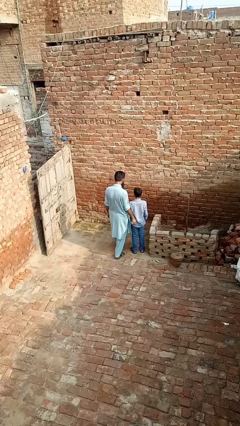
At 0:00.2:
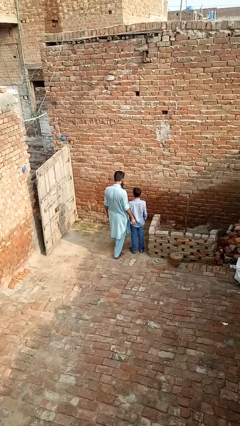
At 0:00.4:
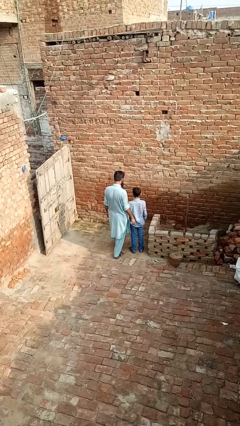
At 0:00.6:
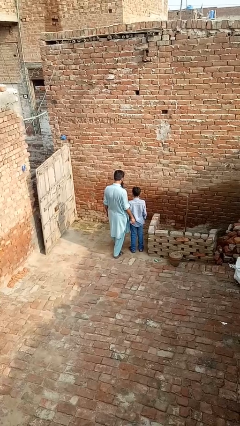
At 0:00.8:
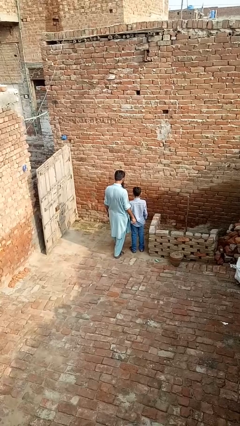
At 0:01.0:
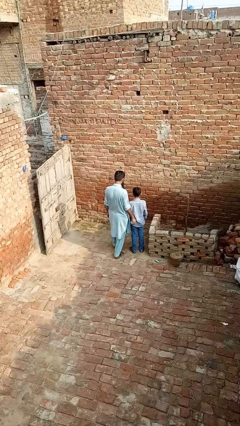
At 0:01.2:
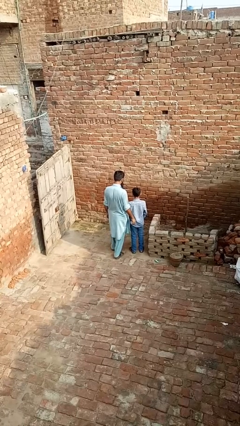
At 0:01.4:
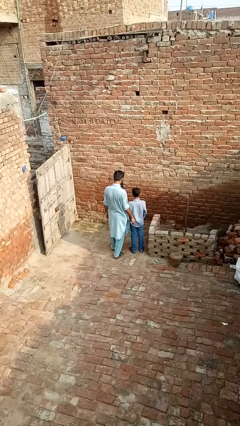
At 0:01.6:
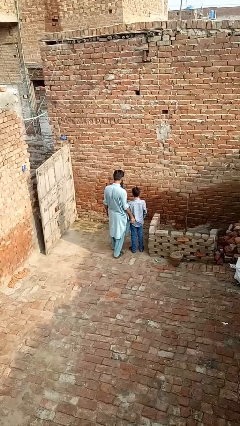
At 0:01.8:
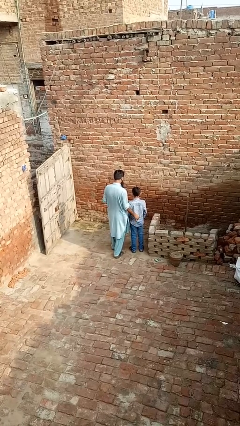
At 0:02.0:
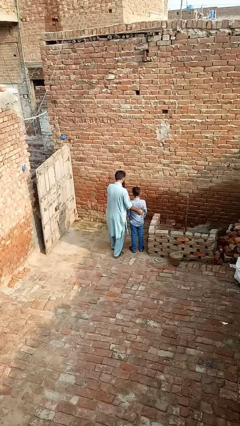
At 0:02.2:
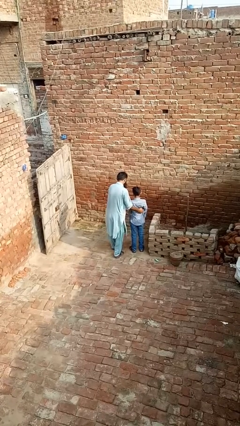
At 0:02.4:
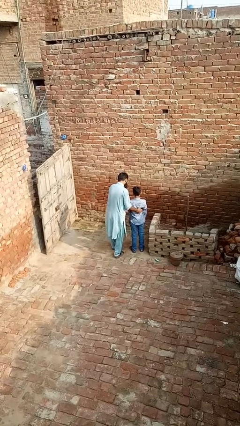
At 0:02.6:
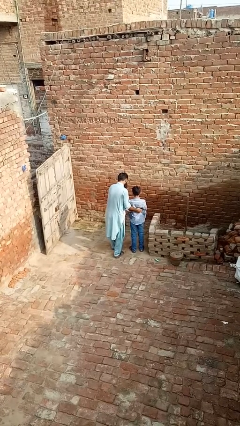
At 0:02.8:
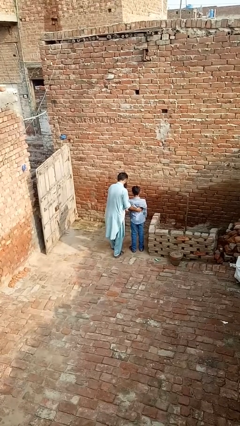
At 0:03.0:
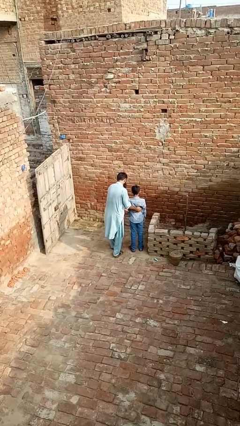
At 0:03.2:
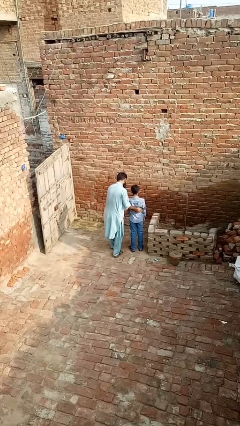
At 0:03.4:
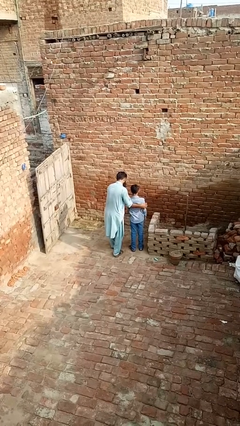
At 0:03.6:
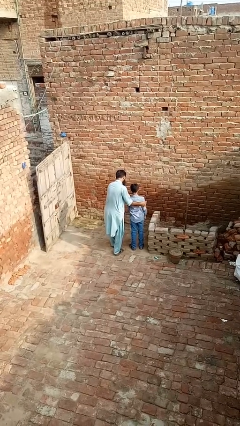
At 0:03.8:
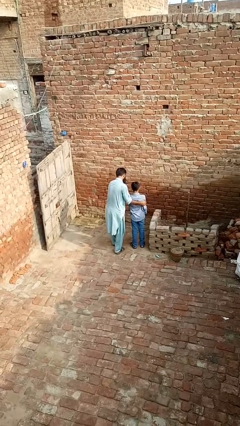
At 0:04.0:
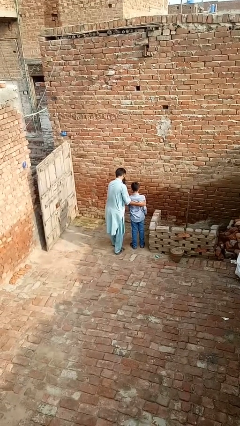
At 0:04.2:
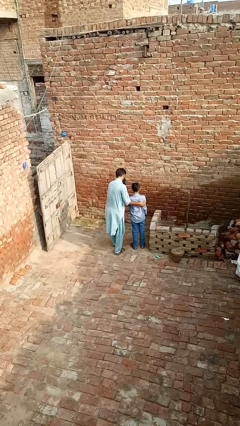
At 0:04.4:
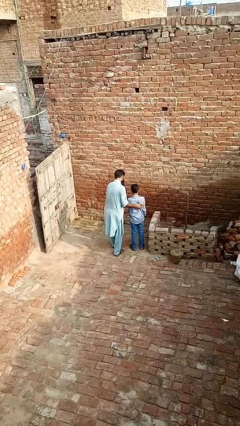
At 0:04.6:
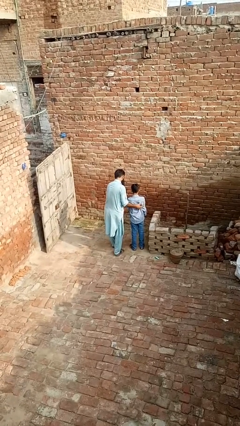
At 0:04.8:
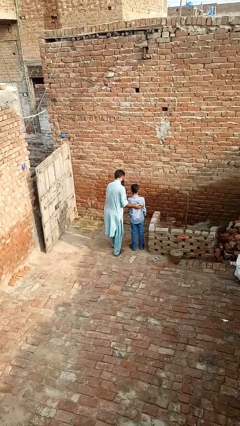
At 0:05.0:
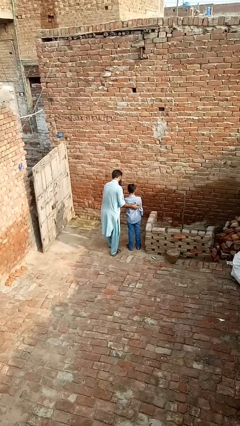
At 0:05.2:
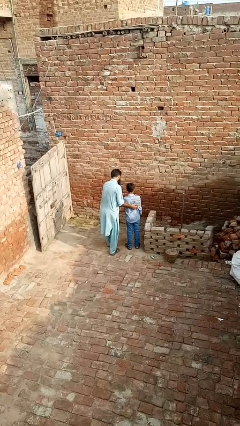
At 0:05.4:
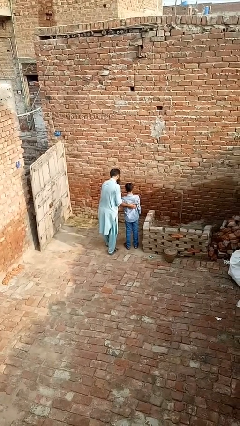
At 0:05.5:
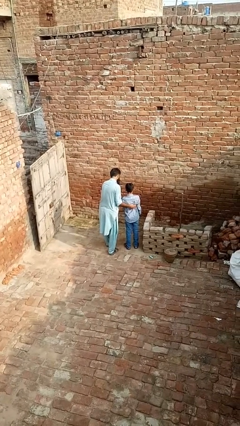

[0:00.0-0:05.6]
person tickles person

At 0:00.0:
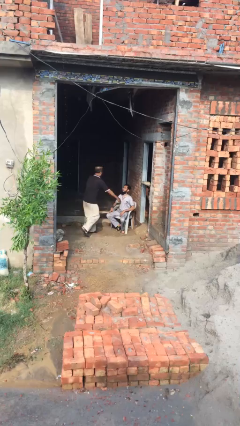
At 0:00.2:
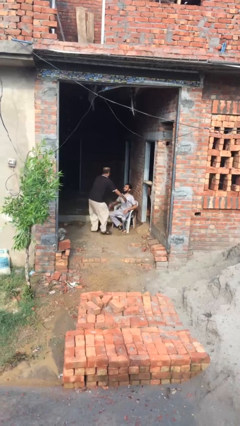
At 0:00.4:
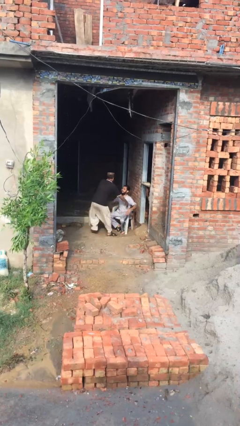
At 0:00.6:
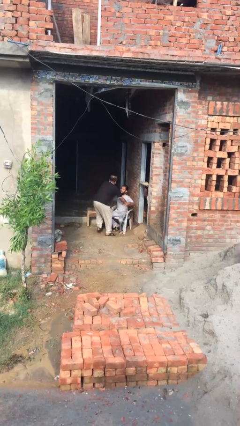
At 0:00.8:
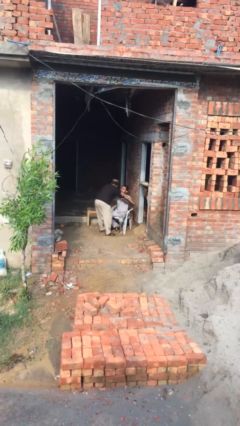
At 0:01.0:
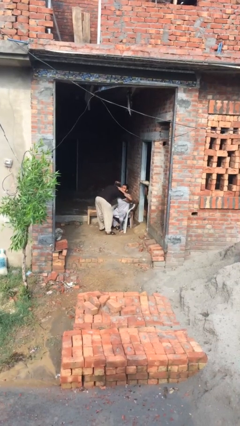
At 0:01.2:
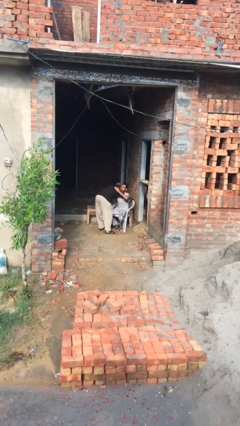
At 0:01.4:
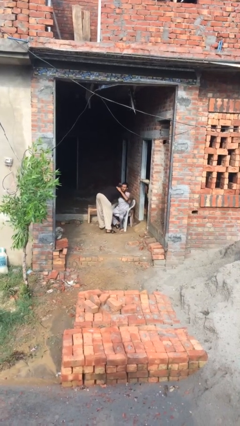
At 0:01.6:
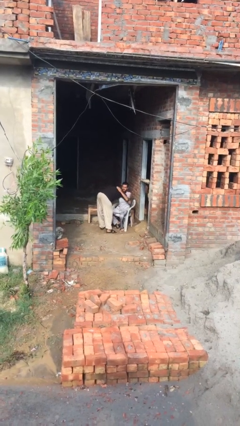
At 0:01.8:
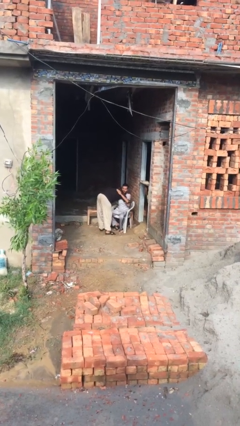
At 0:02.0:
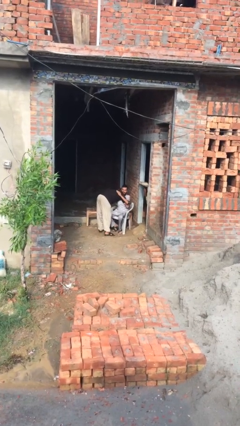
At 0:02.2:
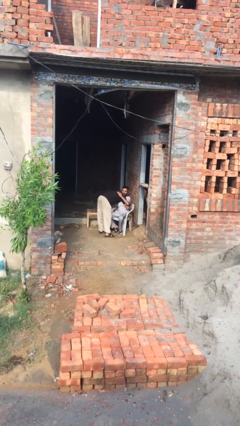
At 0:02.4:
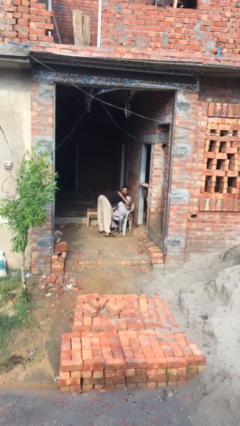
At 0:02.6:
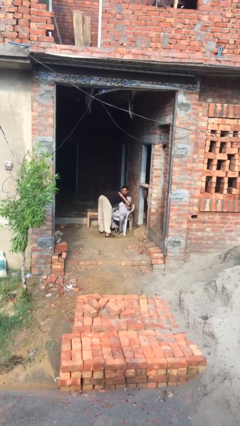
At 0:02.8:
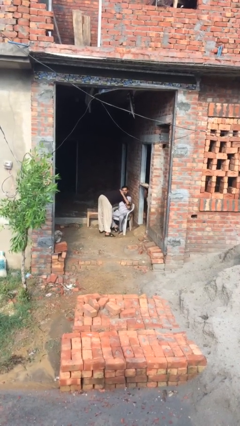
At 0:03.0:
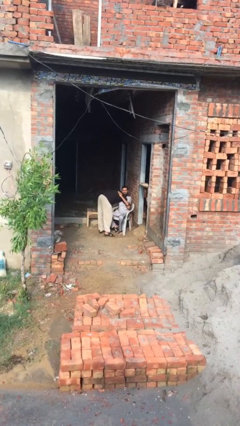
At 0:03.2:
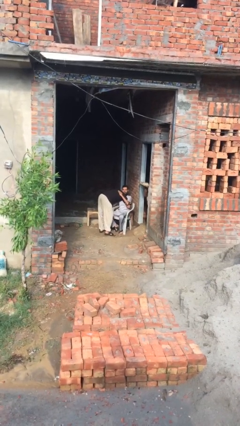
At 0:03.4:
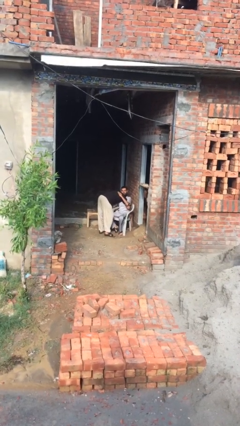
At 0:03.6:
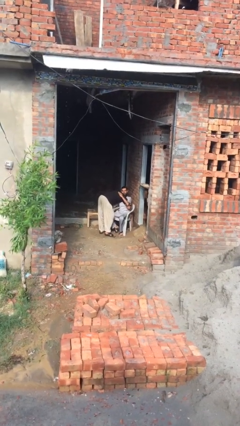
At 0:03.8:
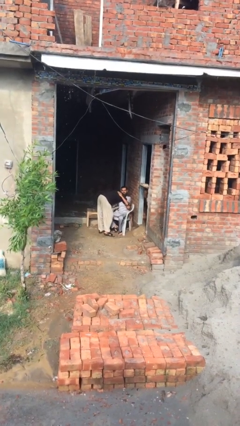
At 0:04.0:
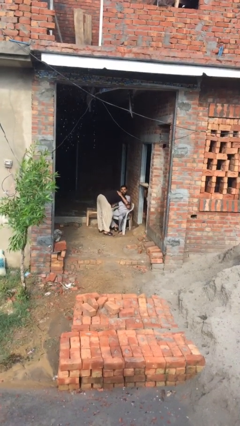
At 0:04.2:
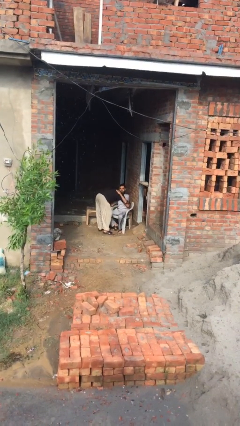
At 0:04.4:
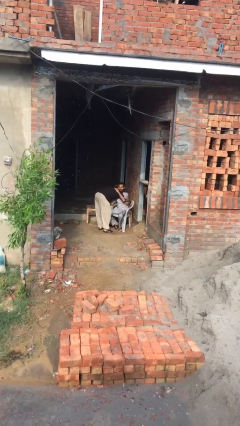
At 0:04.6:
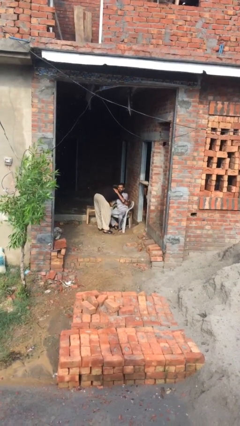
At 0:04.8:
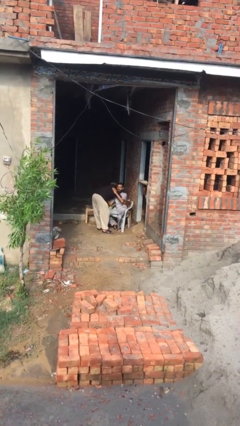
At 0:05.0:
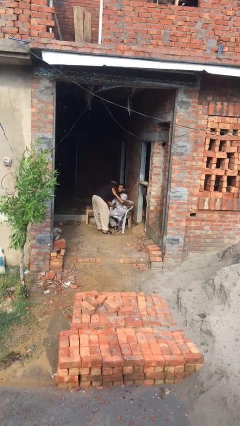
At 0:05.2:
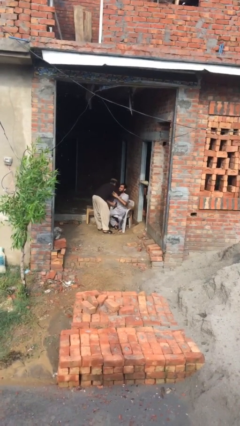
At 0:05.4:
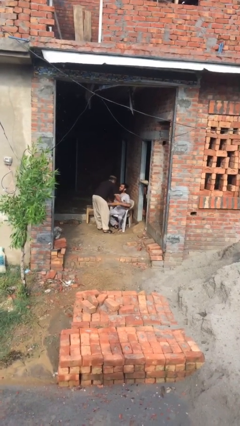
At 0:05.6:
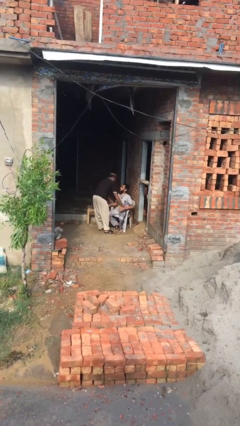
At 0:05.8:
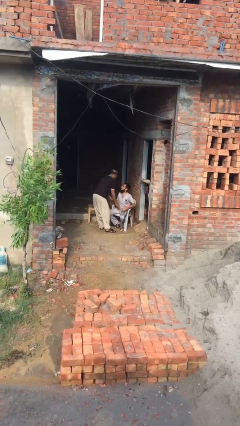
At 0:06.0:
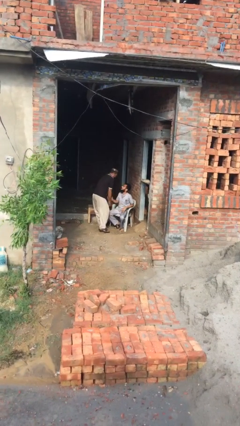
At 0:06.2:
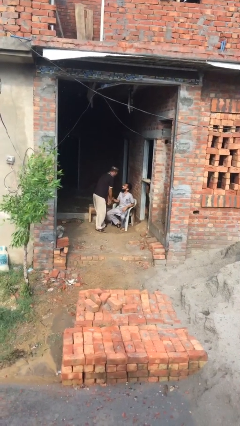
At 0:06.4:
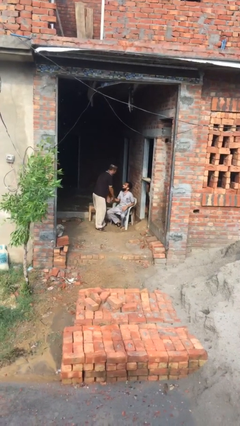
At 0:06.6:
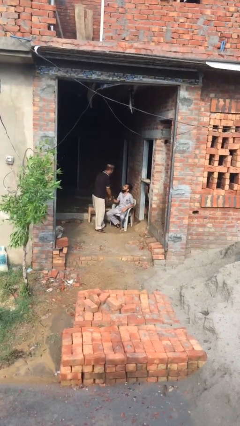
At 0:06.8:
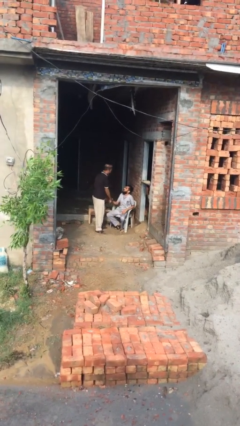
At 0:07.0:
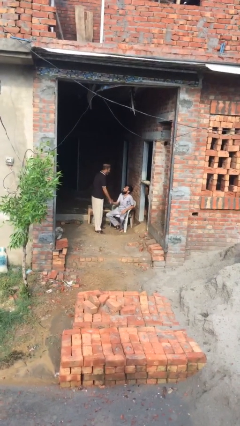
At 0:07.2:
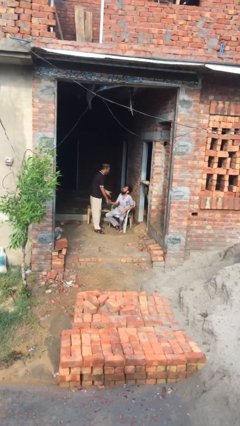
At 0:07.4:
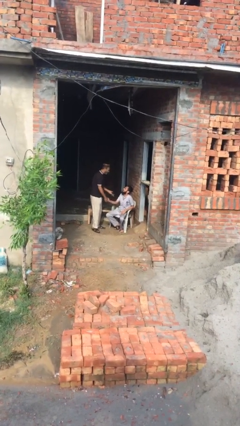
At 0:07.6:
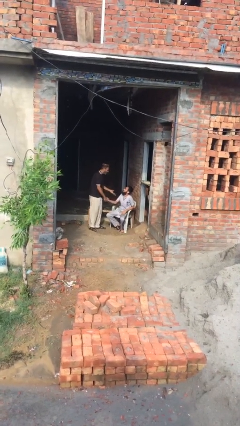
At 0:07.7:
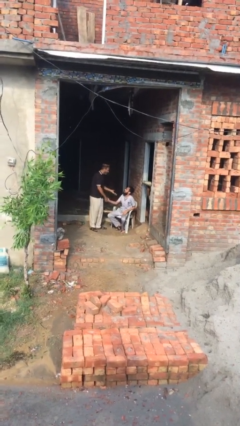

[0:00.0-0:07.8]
person embraces person

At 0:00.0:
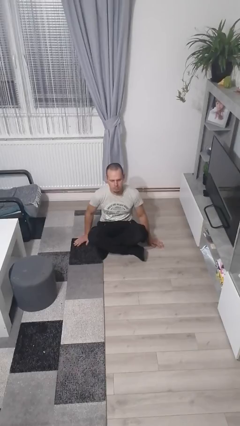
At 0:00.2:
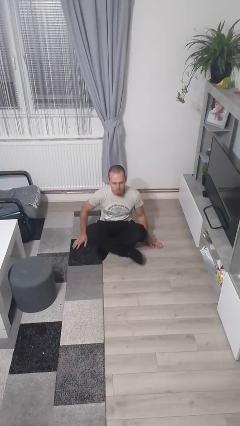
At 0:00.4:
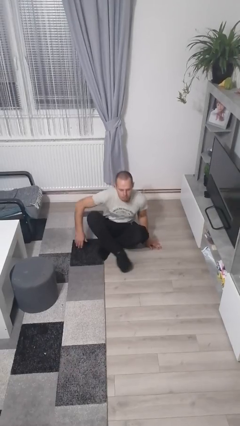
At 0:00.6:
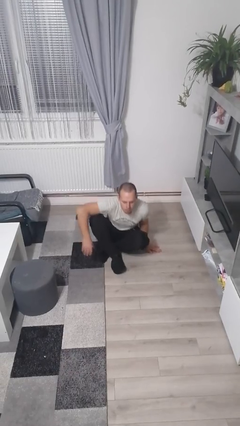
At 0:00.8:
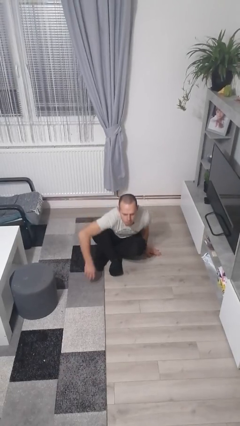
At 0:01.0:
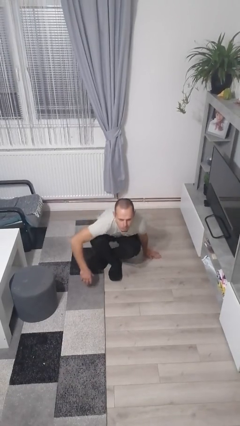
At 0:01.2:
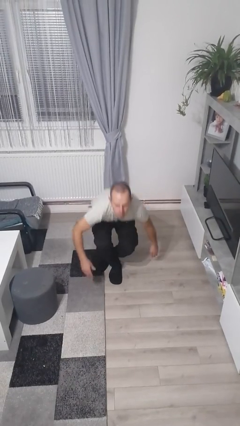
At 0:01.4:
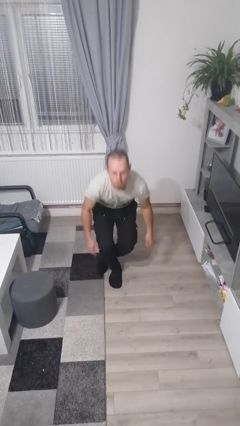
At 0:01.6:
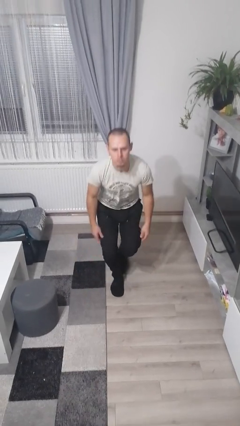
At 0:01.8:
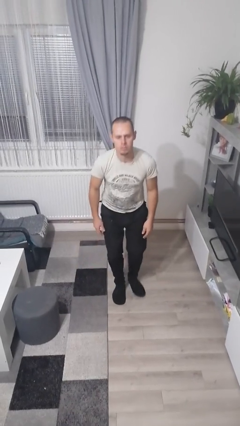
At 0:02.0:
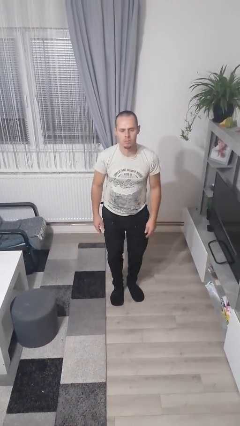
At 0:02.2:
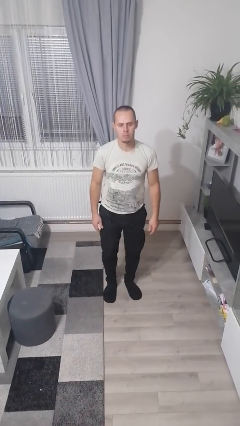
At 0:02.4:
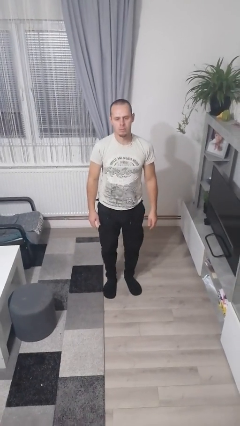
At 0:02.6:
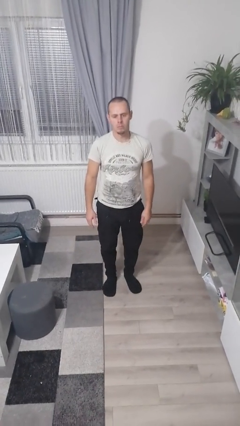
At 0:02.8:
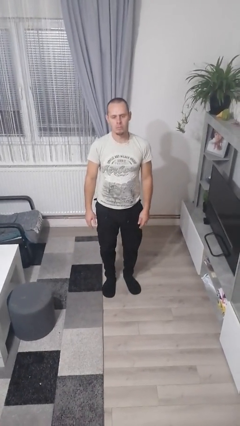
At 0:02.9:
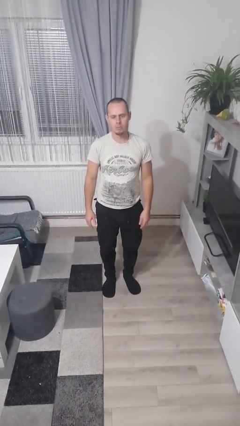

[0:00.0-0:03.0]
person stands up from floor

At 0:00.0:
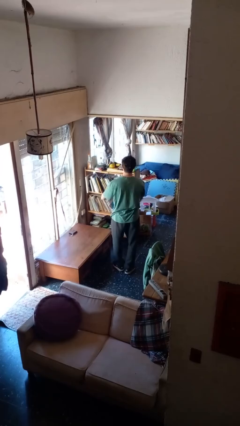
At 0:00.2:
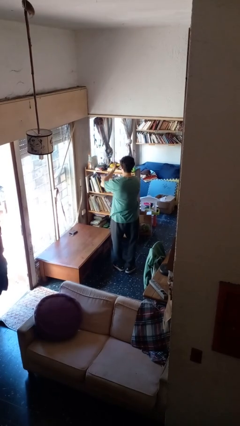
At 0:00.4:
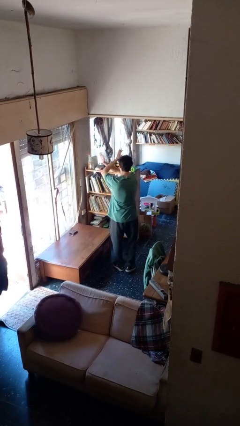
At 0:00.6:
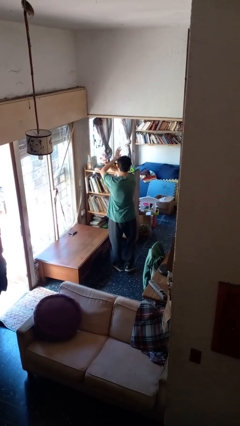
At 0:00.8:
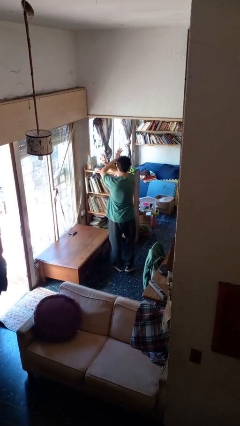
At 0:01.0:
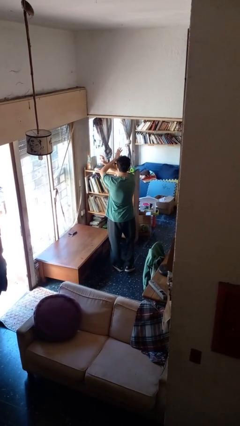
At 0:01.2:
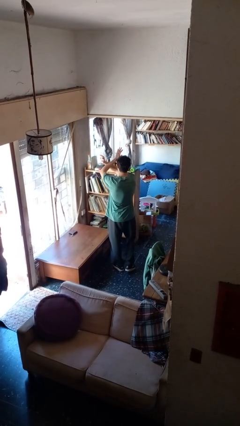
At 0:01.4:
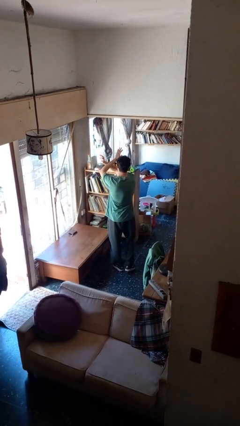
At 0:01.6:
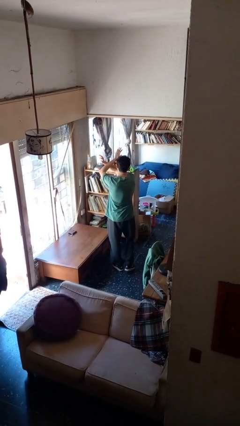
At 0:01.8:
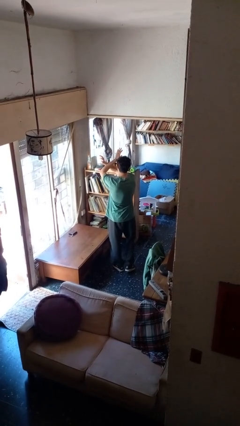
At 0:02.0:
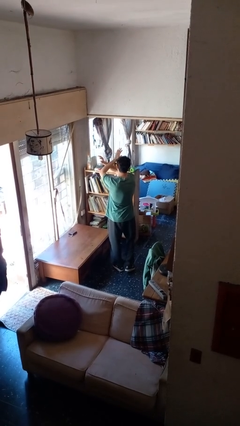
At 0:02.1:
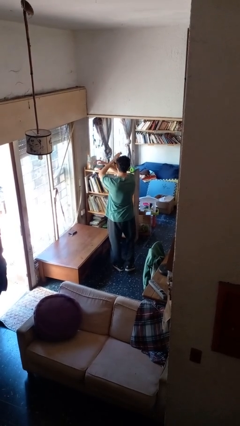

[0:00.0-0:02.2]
person gestures arms x
